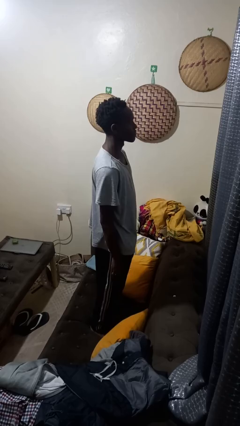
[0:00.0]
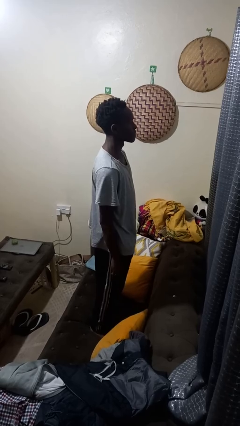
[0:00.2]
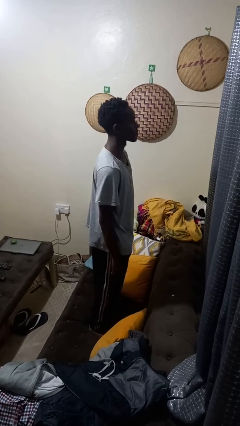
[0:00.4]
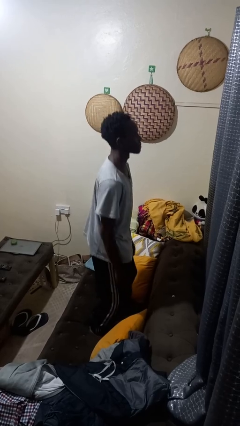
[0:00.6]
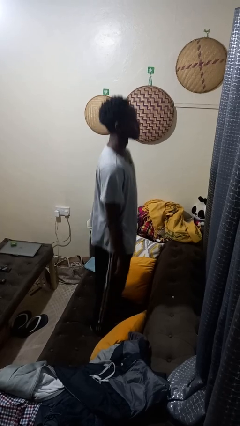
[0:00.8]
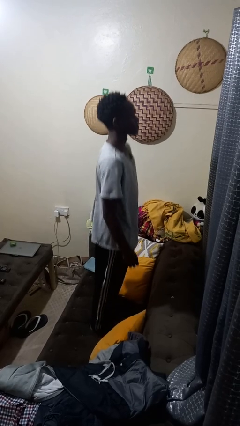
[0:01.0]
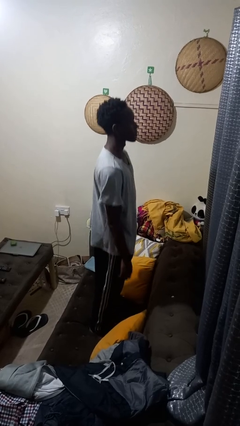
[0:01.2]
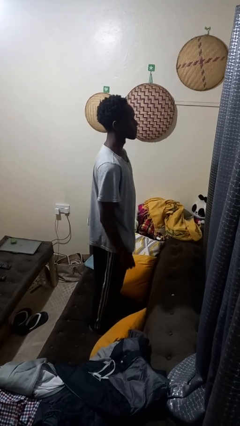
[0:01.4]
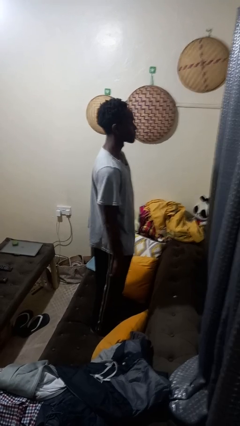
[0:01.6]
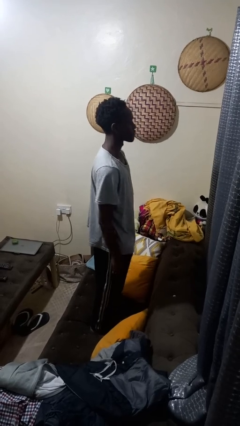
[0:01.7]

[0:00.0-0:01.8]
person jumps on couch

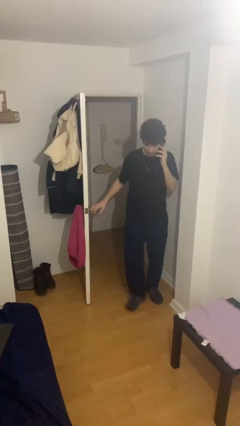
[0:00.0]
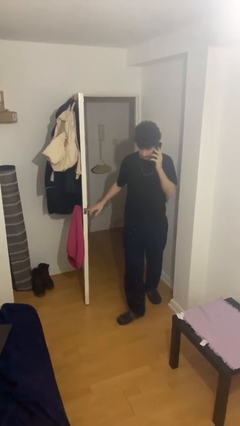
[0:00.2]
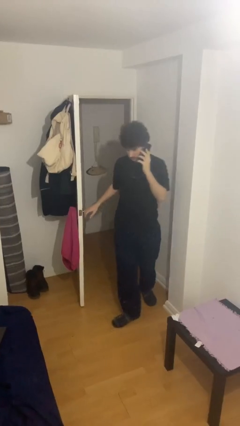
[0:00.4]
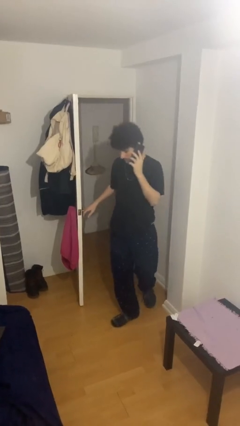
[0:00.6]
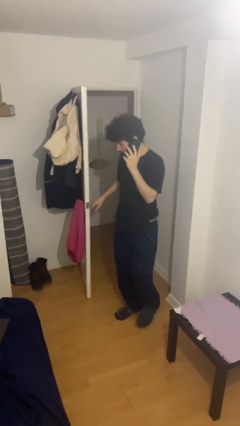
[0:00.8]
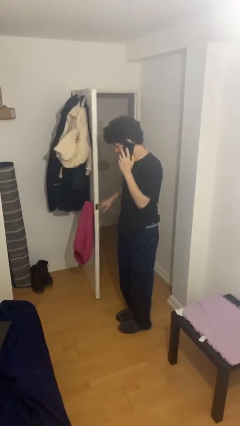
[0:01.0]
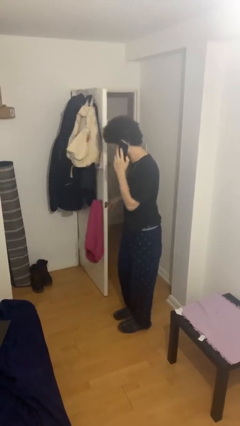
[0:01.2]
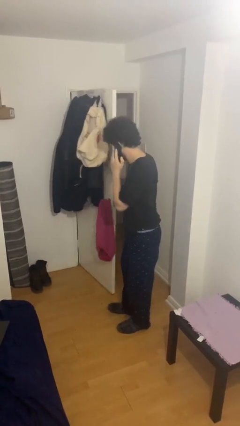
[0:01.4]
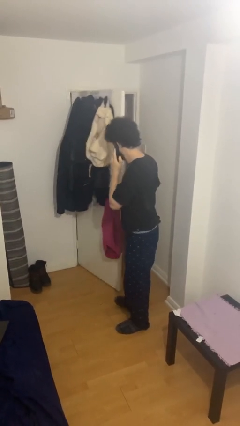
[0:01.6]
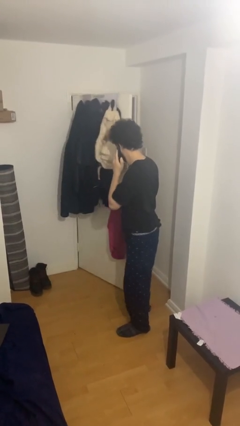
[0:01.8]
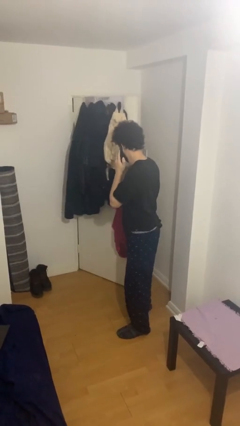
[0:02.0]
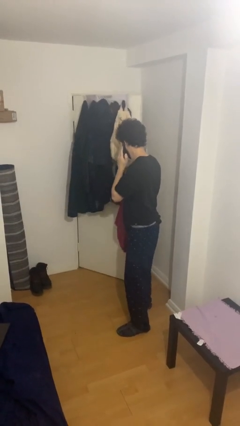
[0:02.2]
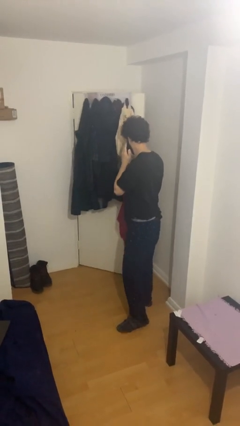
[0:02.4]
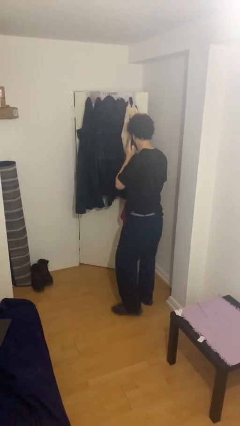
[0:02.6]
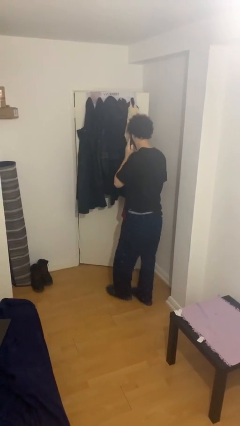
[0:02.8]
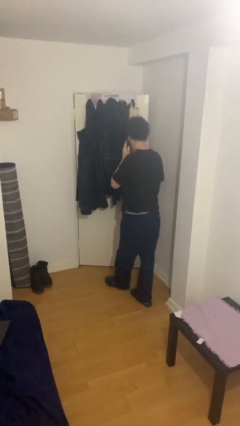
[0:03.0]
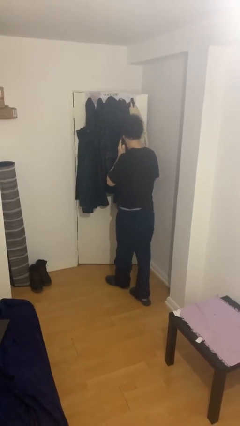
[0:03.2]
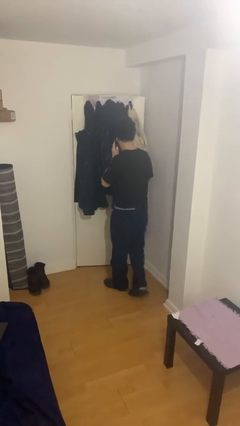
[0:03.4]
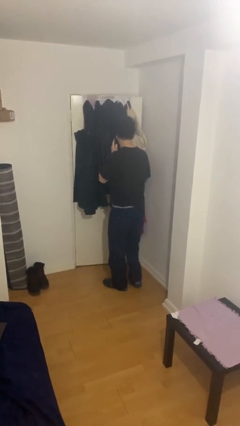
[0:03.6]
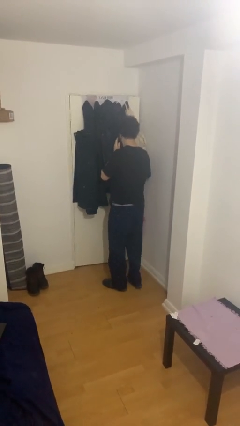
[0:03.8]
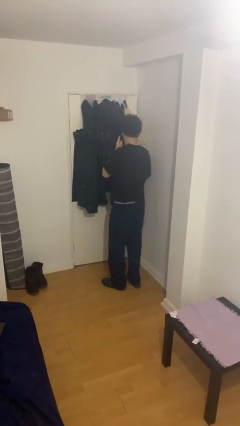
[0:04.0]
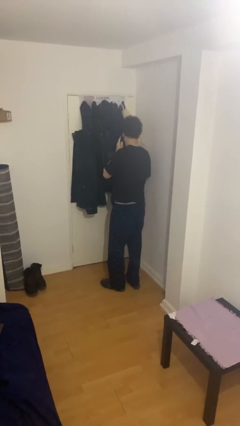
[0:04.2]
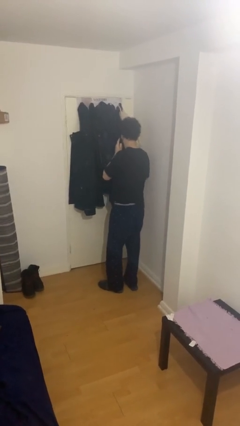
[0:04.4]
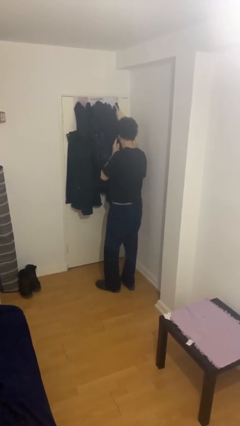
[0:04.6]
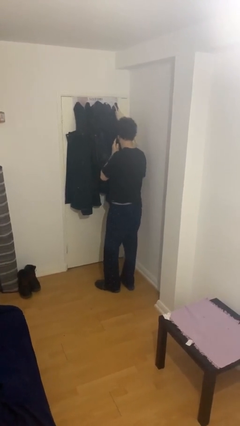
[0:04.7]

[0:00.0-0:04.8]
person closes facility door

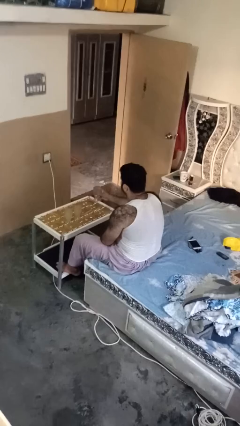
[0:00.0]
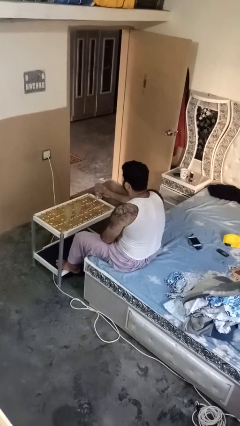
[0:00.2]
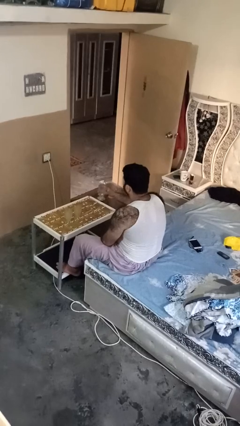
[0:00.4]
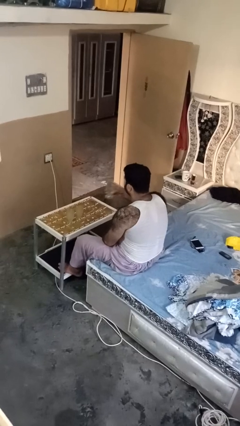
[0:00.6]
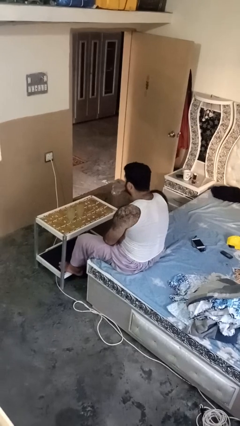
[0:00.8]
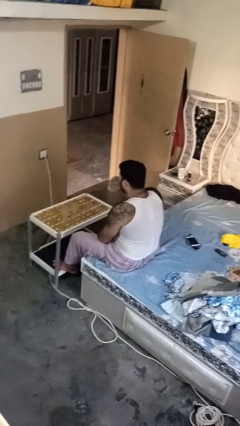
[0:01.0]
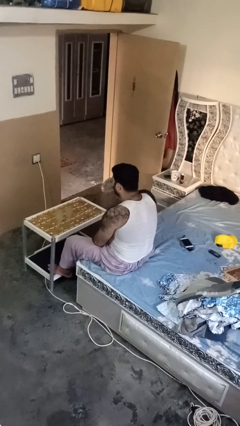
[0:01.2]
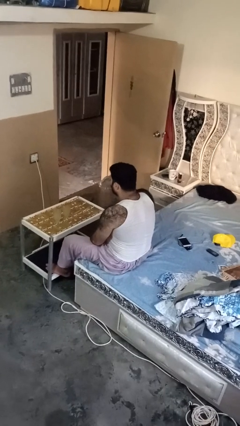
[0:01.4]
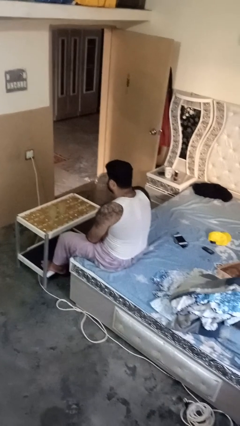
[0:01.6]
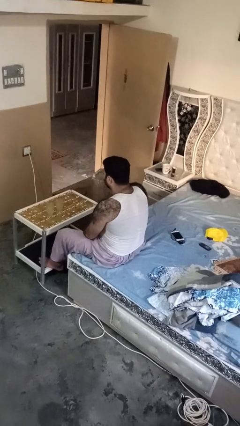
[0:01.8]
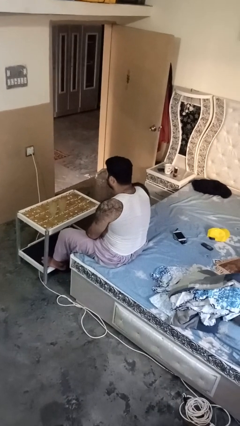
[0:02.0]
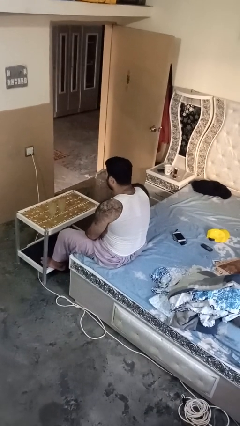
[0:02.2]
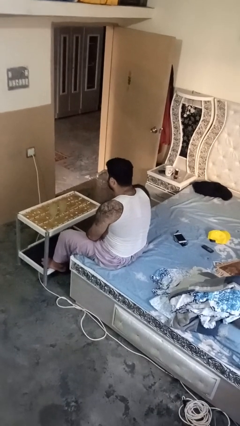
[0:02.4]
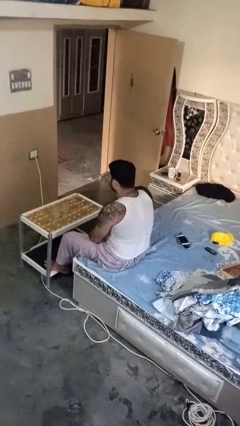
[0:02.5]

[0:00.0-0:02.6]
person drinks from shotglass

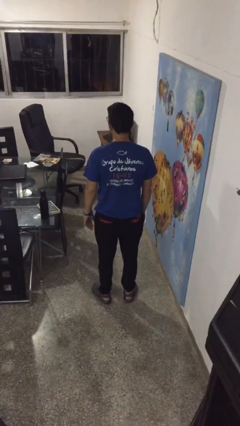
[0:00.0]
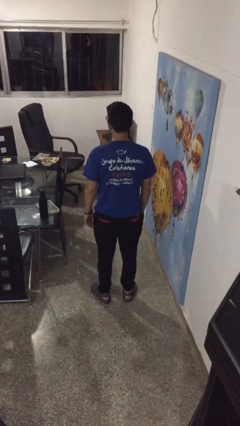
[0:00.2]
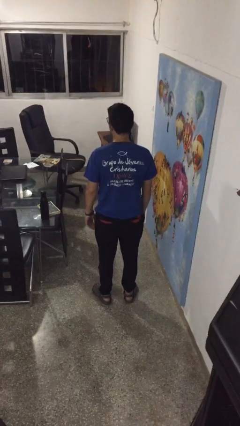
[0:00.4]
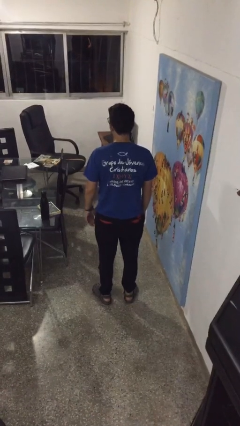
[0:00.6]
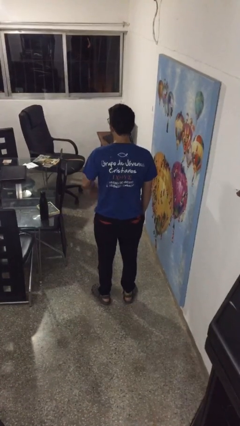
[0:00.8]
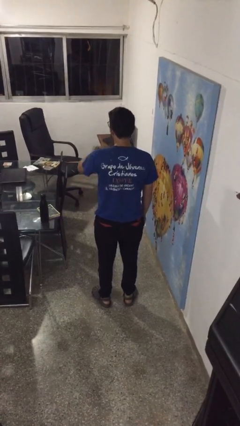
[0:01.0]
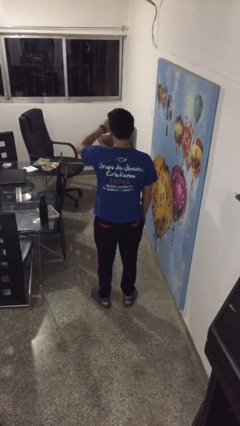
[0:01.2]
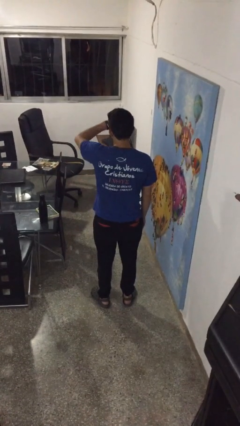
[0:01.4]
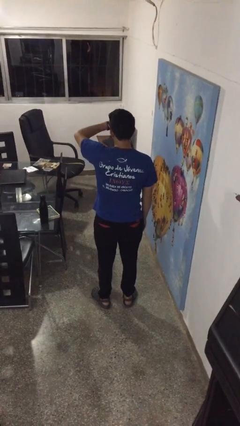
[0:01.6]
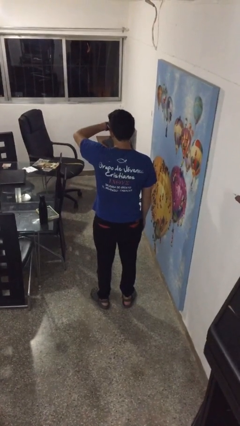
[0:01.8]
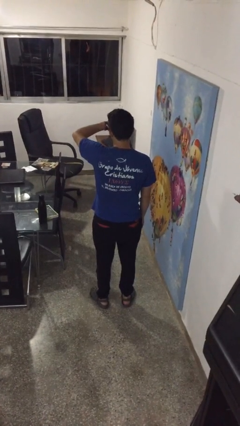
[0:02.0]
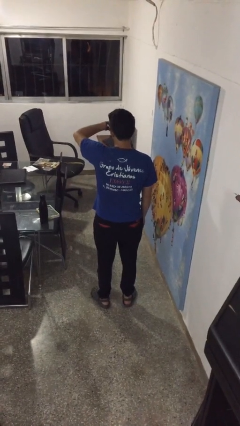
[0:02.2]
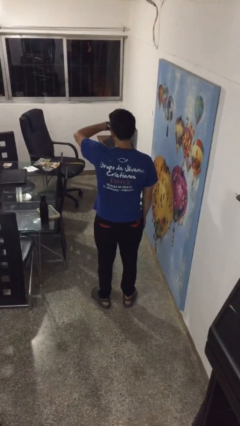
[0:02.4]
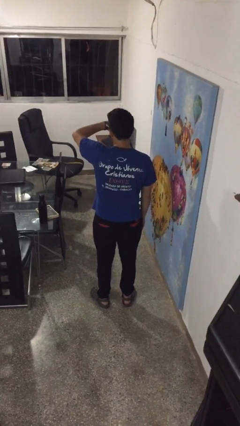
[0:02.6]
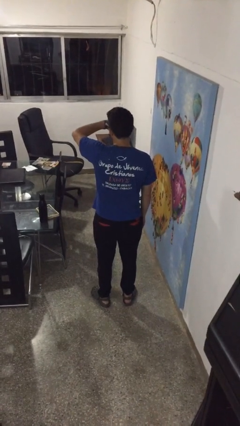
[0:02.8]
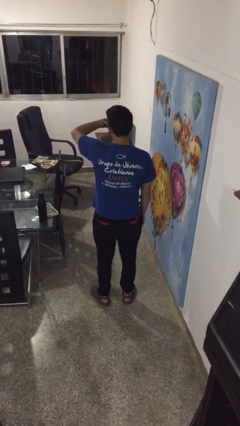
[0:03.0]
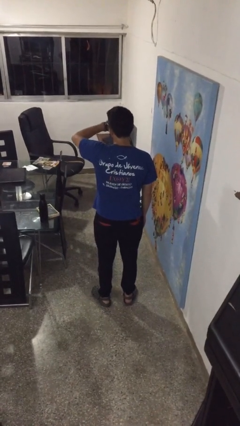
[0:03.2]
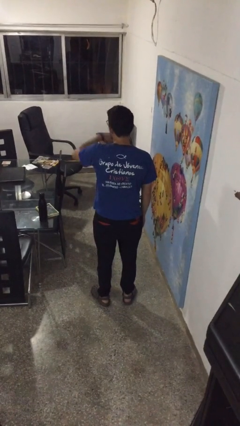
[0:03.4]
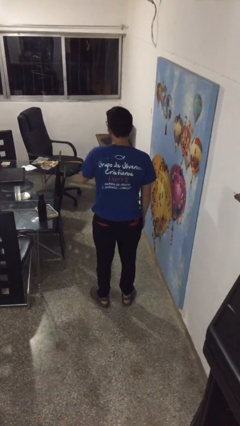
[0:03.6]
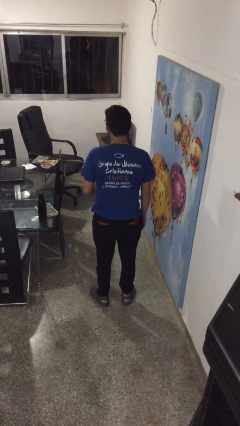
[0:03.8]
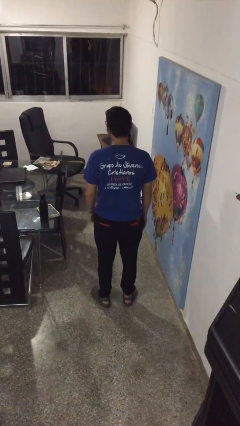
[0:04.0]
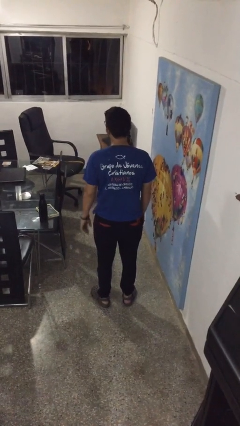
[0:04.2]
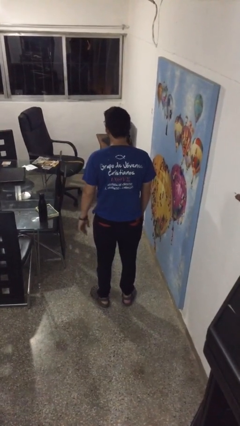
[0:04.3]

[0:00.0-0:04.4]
person looks at wristwatch

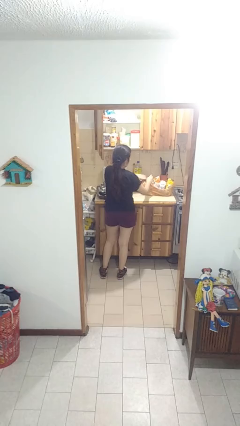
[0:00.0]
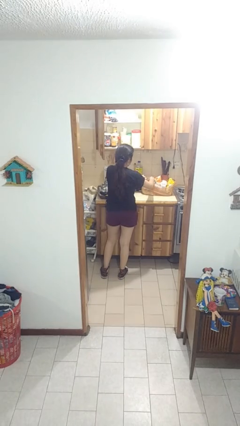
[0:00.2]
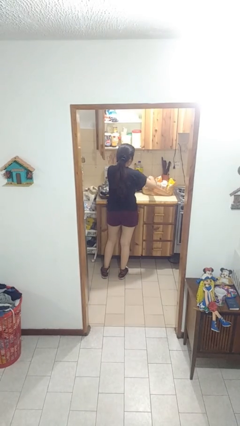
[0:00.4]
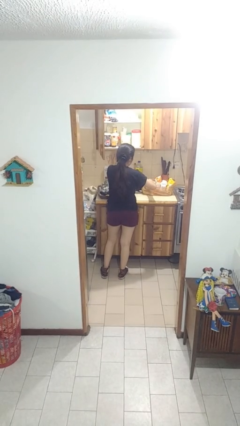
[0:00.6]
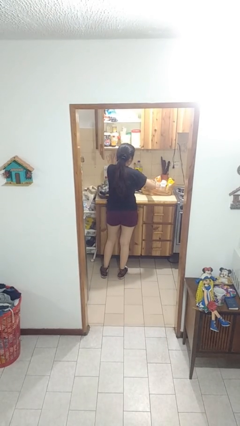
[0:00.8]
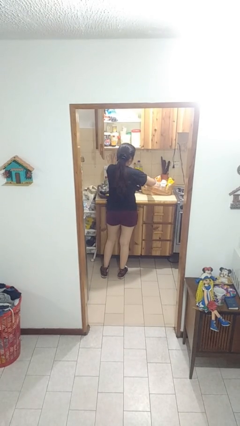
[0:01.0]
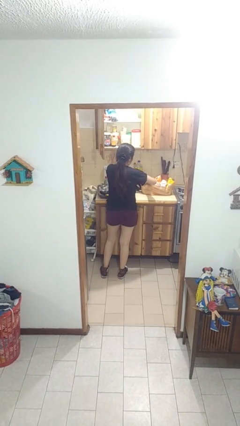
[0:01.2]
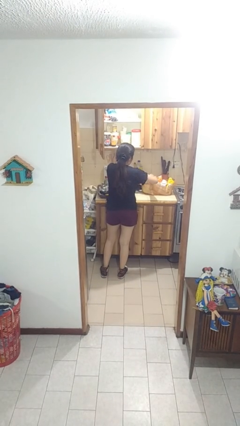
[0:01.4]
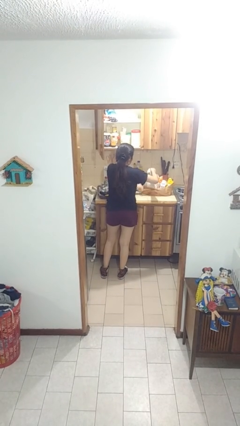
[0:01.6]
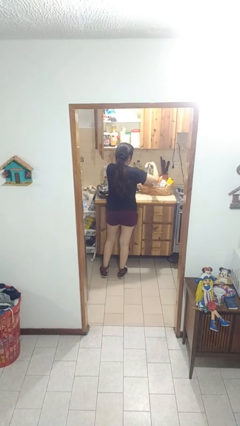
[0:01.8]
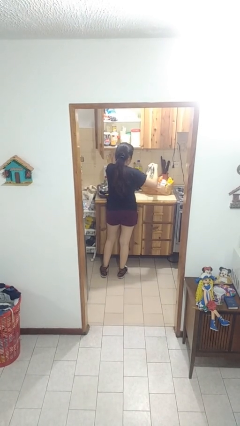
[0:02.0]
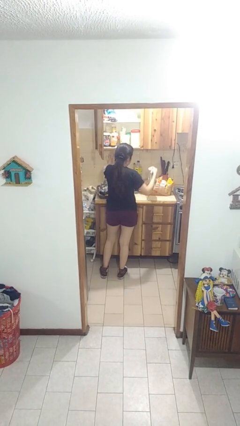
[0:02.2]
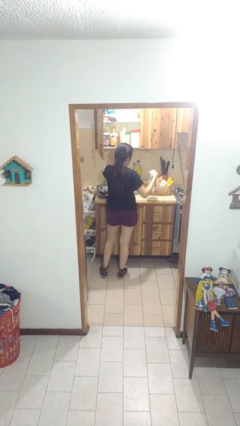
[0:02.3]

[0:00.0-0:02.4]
person takes object from bag

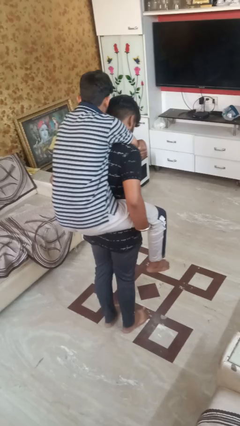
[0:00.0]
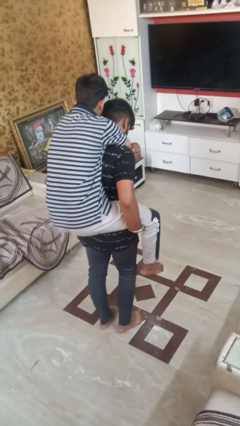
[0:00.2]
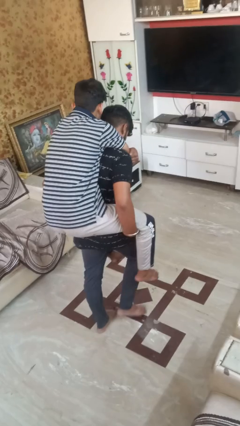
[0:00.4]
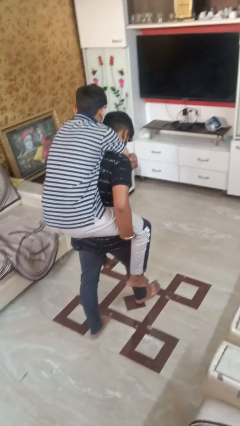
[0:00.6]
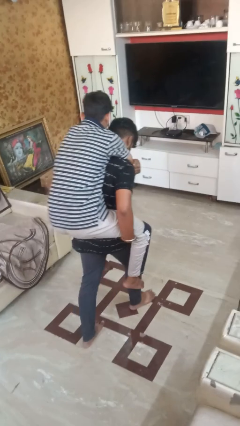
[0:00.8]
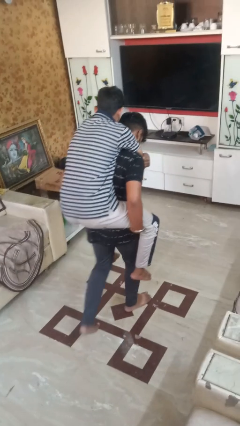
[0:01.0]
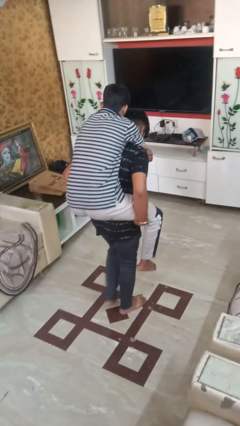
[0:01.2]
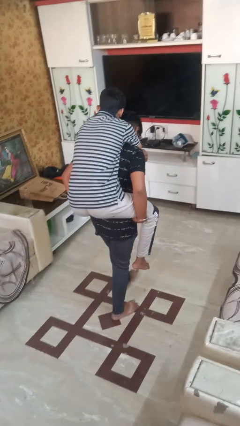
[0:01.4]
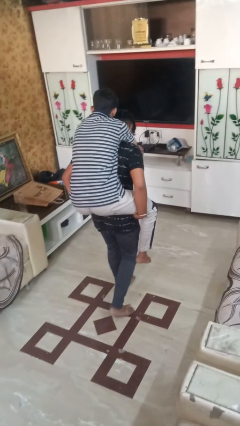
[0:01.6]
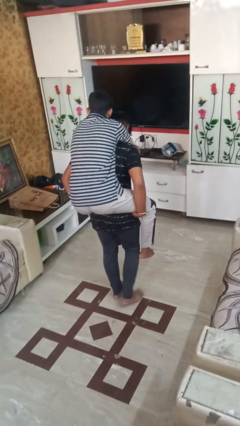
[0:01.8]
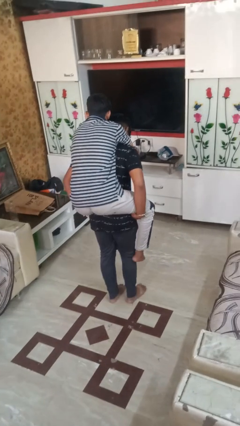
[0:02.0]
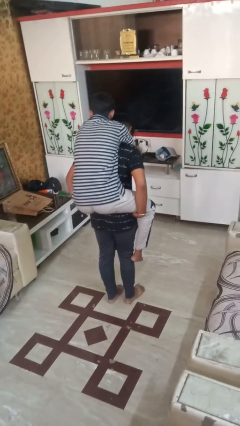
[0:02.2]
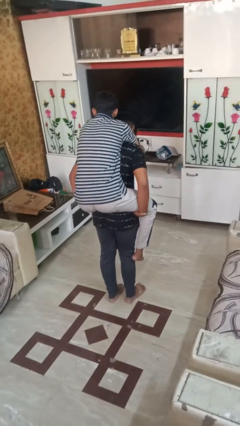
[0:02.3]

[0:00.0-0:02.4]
person carries person on back
